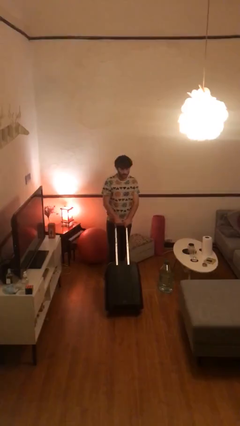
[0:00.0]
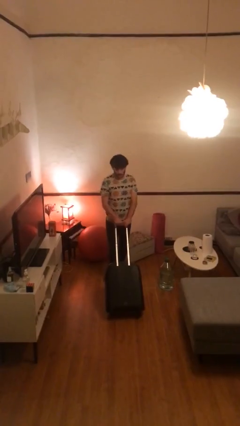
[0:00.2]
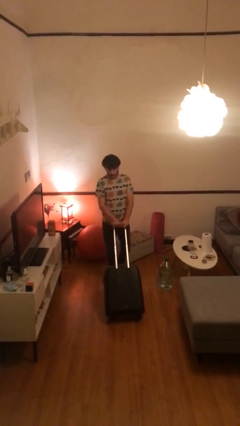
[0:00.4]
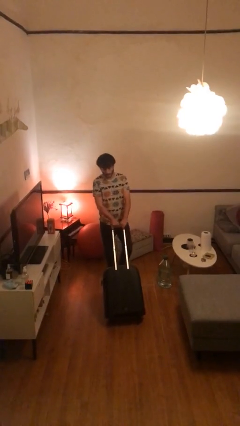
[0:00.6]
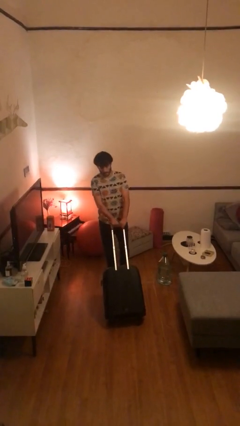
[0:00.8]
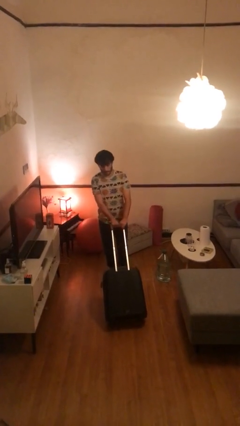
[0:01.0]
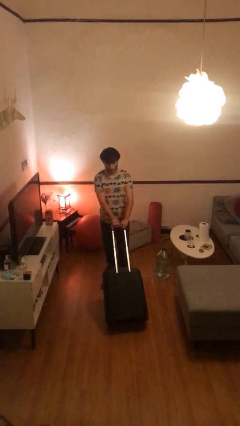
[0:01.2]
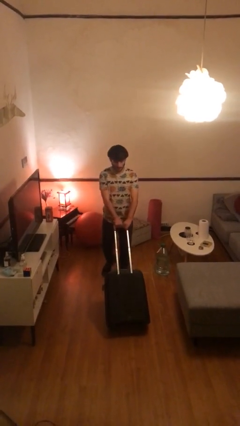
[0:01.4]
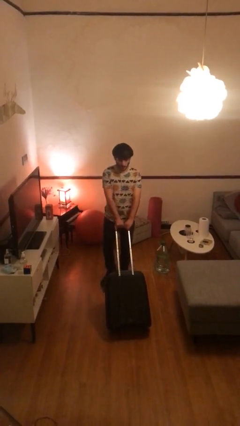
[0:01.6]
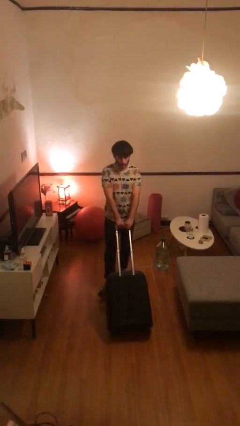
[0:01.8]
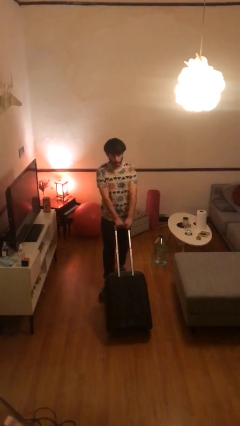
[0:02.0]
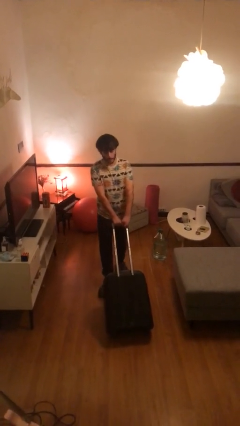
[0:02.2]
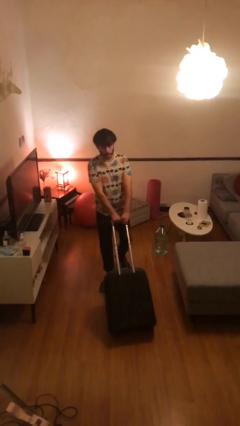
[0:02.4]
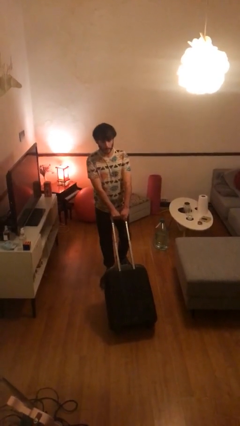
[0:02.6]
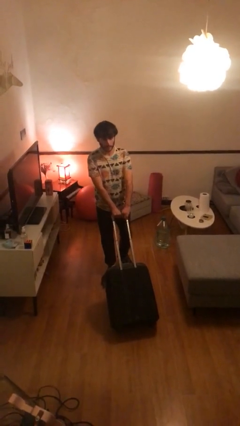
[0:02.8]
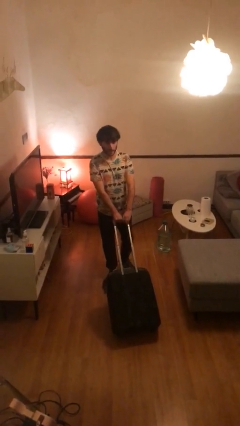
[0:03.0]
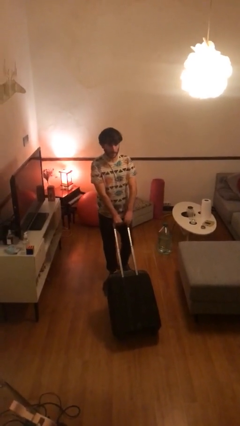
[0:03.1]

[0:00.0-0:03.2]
person pushes wheeled cart

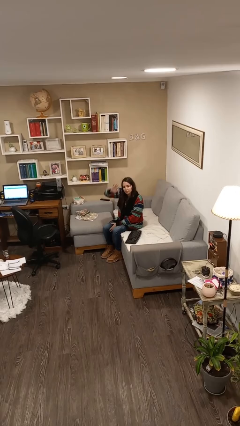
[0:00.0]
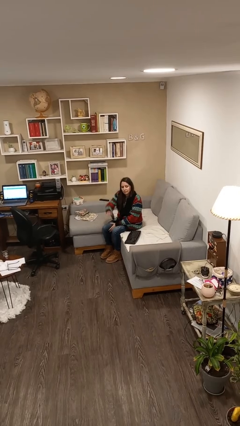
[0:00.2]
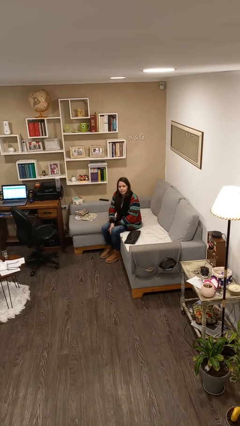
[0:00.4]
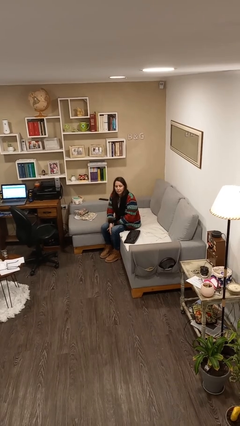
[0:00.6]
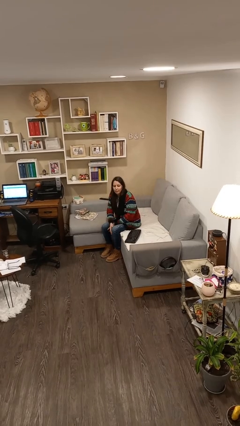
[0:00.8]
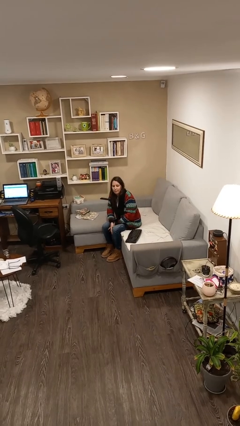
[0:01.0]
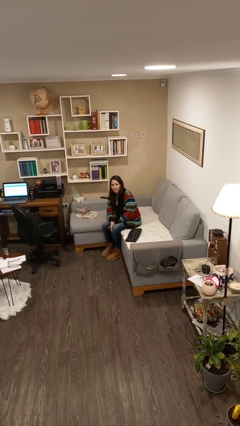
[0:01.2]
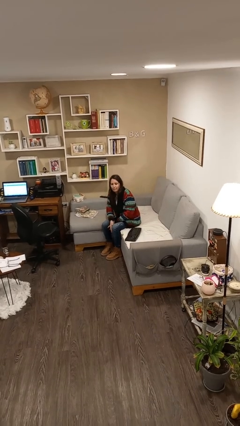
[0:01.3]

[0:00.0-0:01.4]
person gestures lower hand

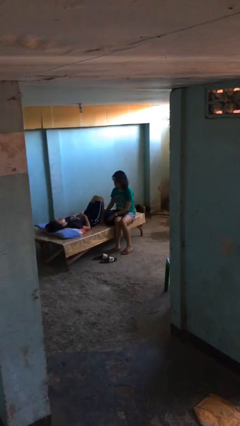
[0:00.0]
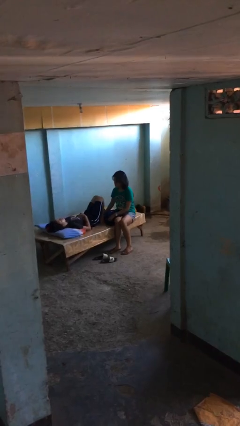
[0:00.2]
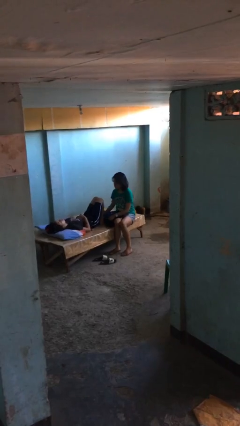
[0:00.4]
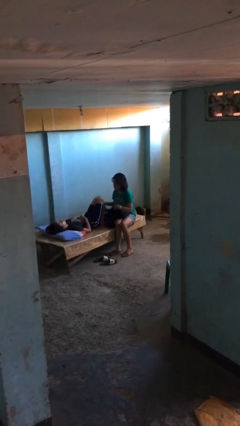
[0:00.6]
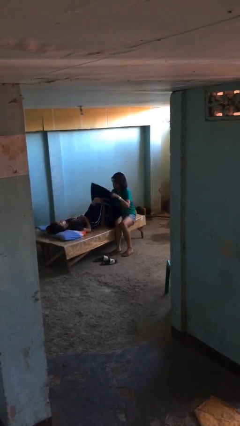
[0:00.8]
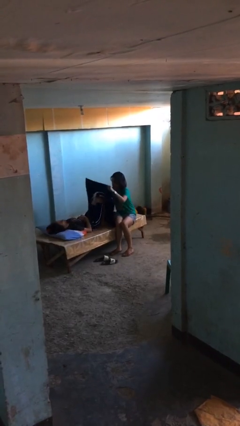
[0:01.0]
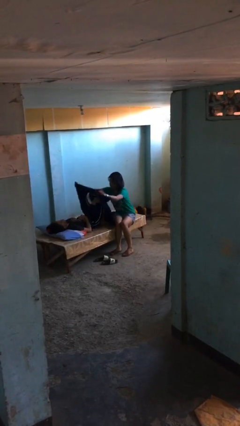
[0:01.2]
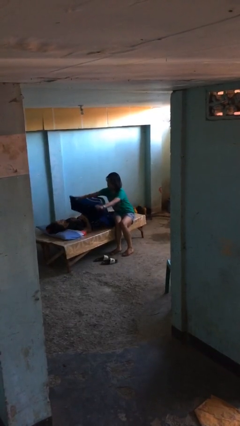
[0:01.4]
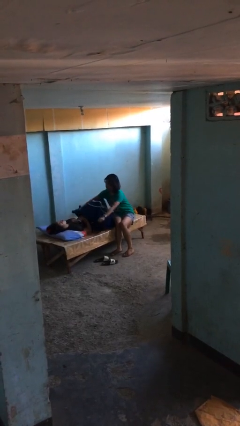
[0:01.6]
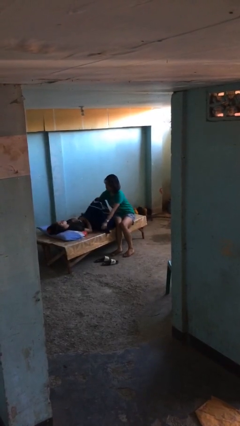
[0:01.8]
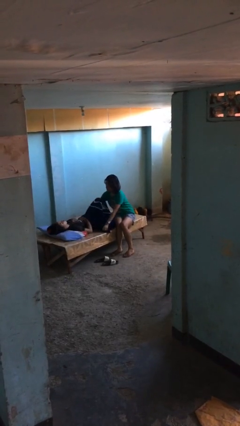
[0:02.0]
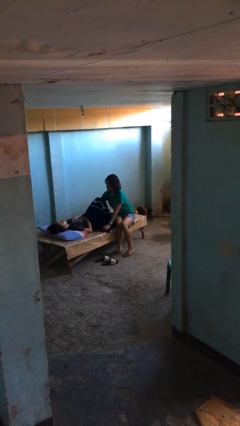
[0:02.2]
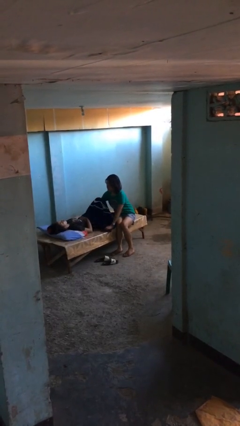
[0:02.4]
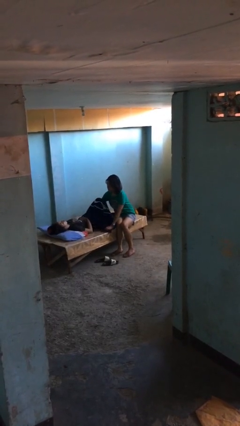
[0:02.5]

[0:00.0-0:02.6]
person covers friend with blanket

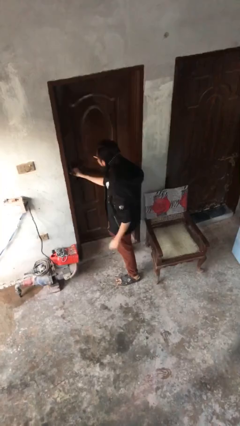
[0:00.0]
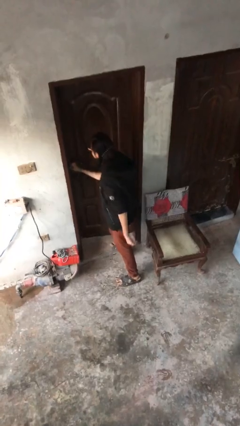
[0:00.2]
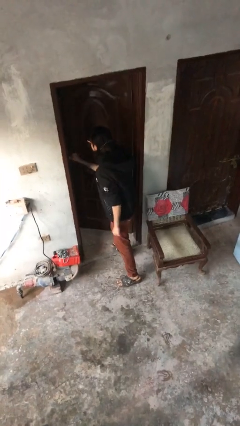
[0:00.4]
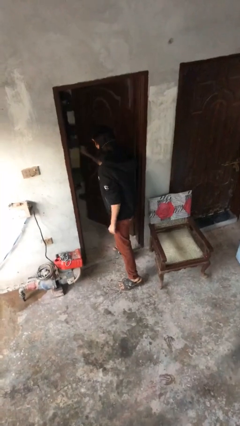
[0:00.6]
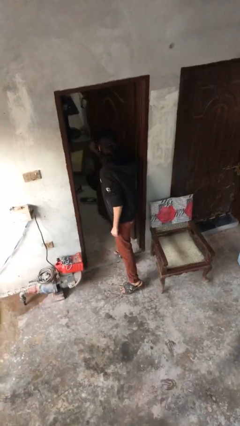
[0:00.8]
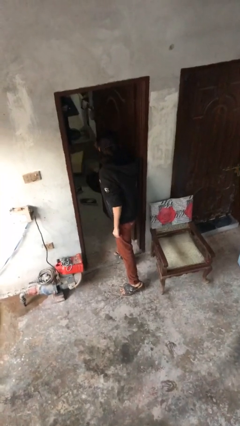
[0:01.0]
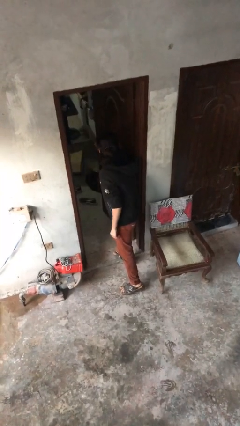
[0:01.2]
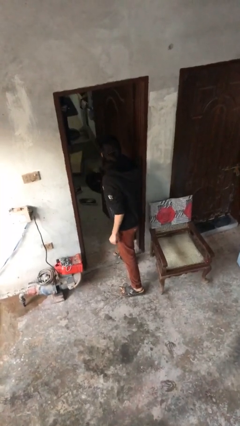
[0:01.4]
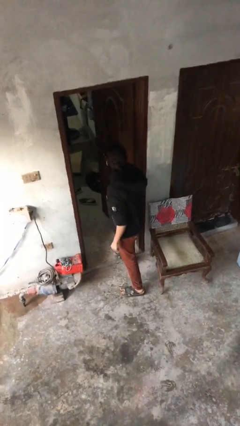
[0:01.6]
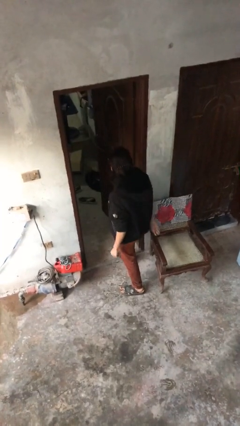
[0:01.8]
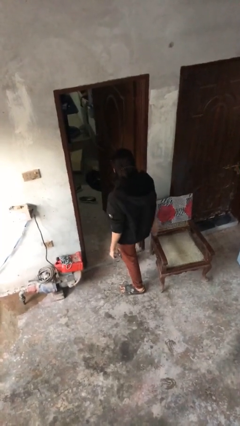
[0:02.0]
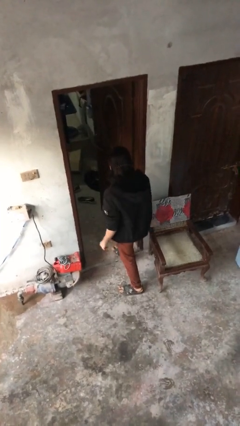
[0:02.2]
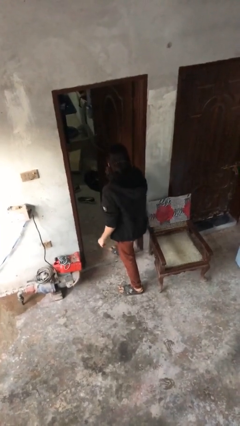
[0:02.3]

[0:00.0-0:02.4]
person opens facility door

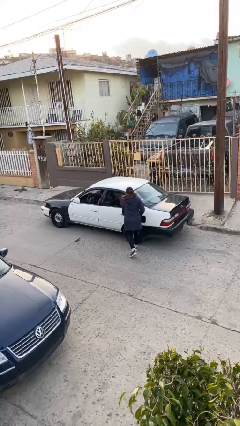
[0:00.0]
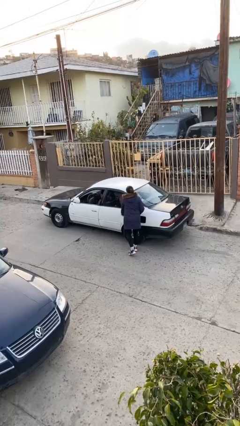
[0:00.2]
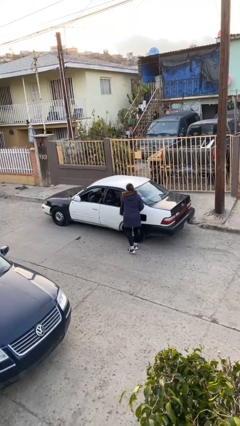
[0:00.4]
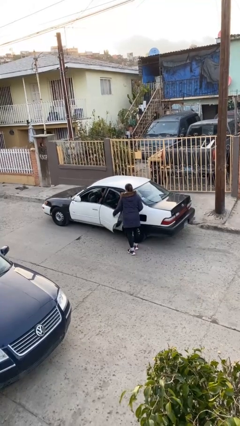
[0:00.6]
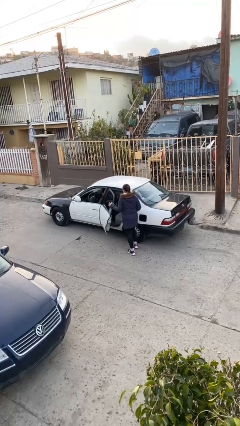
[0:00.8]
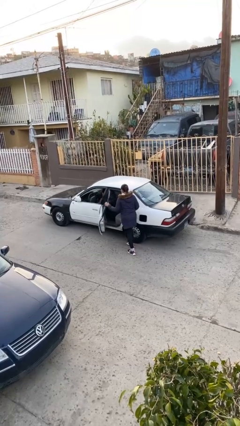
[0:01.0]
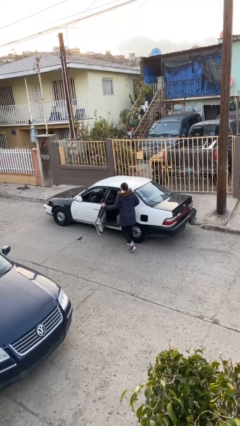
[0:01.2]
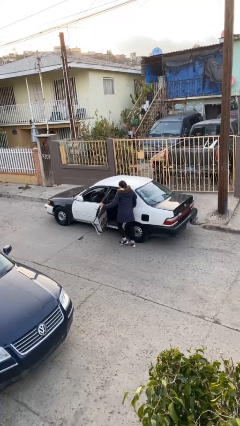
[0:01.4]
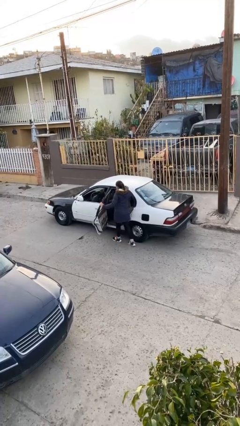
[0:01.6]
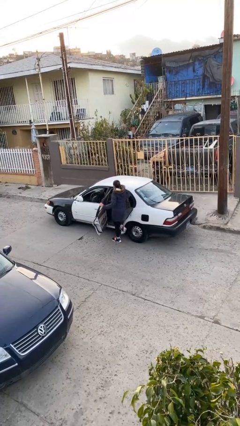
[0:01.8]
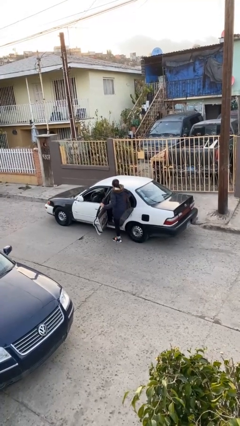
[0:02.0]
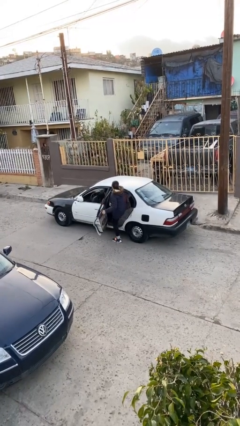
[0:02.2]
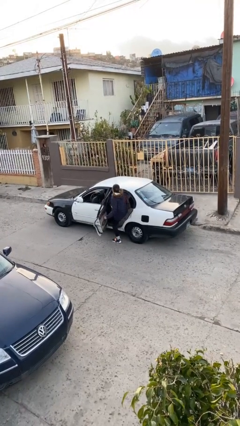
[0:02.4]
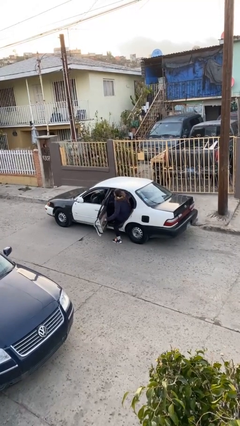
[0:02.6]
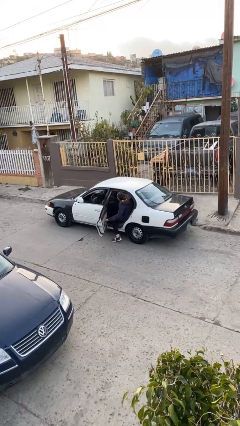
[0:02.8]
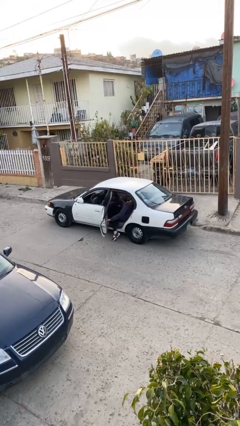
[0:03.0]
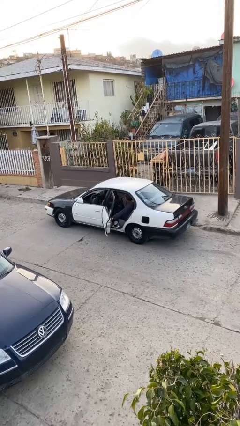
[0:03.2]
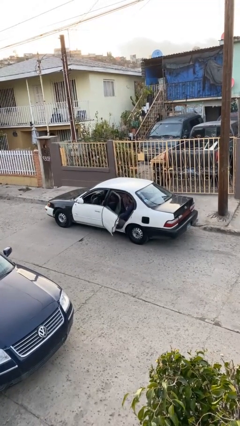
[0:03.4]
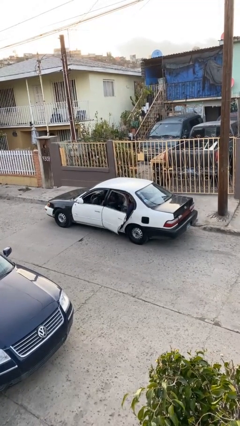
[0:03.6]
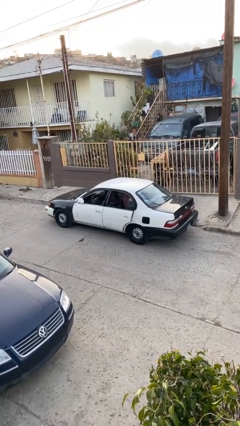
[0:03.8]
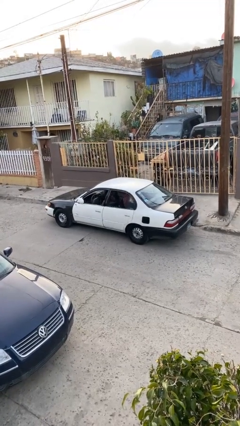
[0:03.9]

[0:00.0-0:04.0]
car picks up person

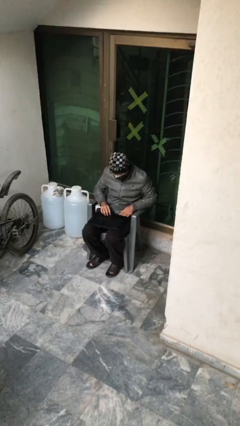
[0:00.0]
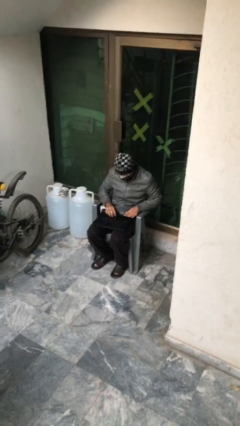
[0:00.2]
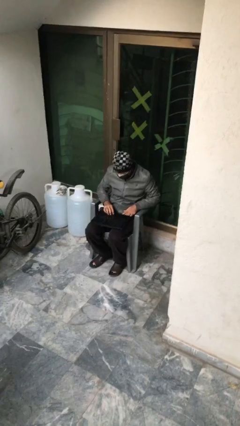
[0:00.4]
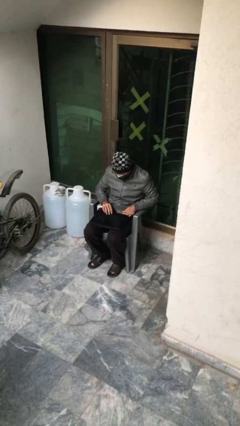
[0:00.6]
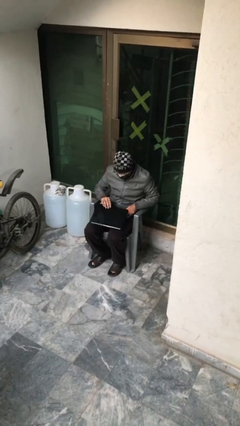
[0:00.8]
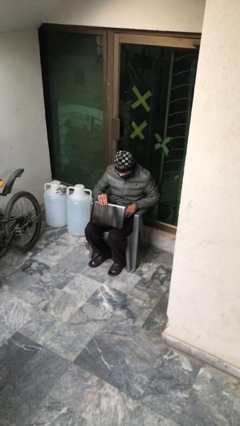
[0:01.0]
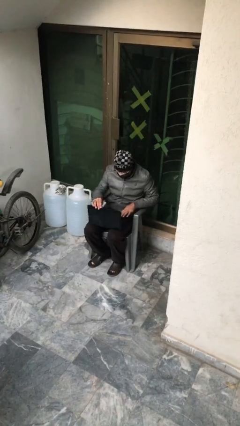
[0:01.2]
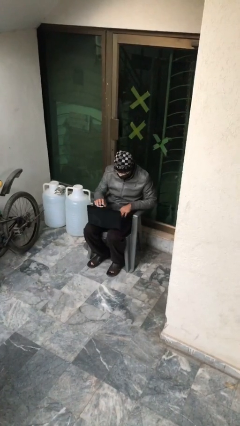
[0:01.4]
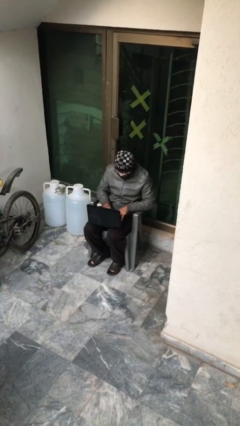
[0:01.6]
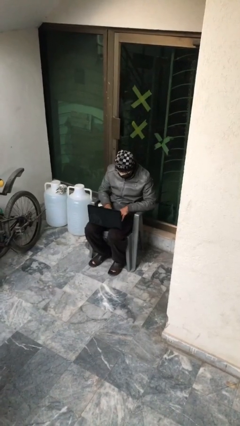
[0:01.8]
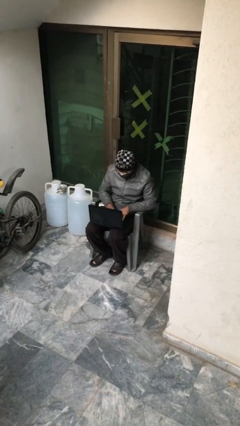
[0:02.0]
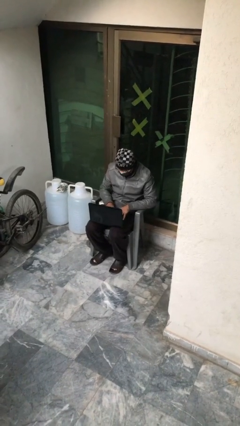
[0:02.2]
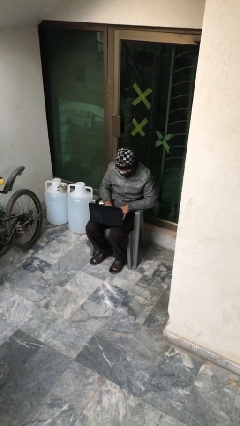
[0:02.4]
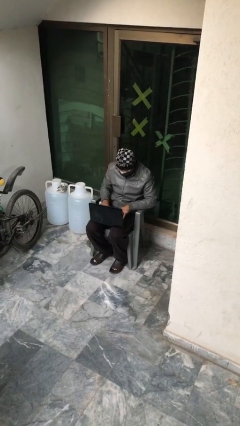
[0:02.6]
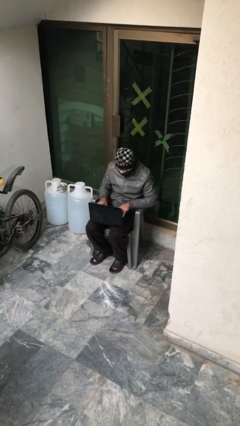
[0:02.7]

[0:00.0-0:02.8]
person interacts with laptop

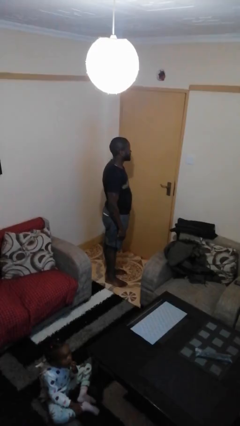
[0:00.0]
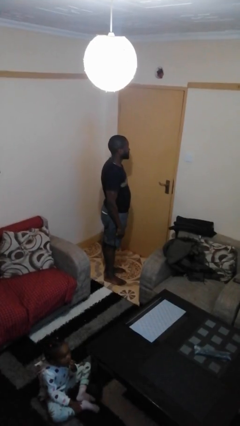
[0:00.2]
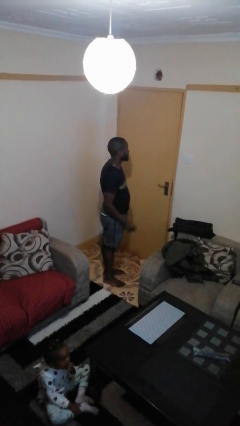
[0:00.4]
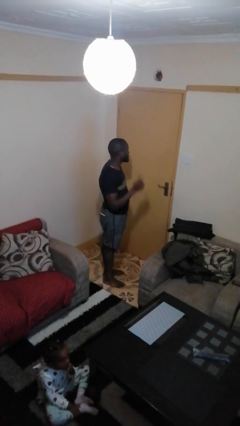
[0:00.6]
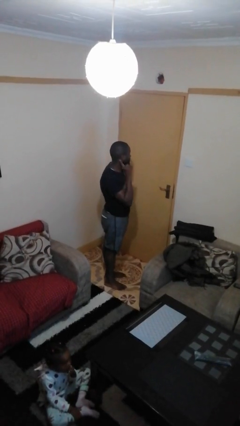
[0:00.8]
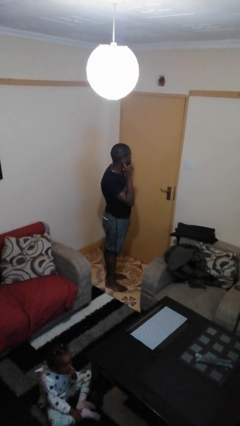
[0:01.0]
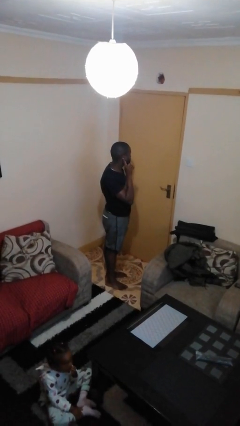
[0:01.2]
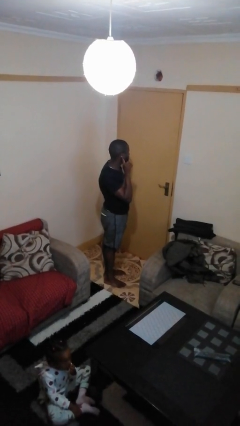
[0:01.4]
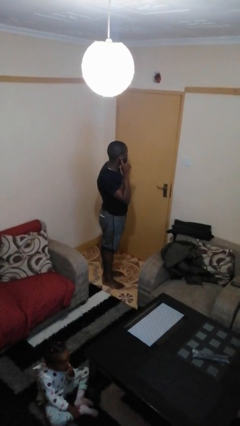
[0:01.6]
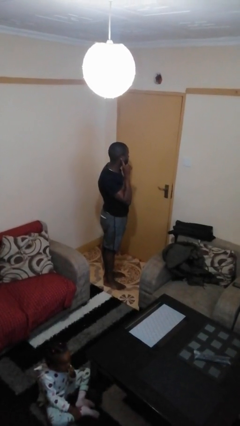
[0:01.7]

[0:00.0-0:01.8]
person gestures listen closely
